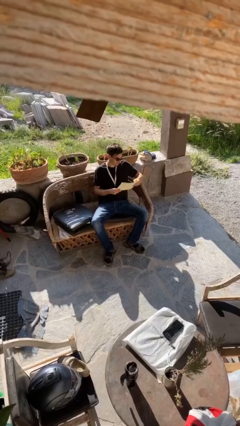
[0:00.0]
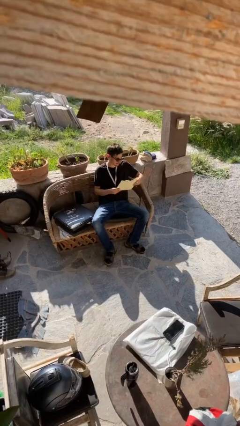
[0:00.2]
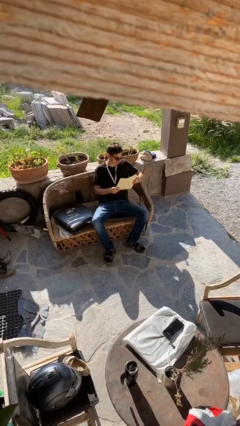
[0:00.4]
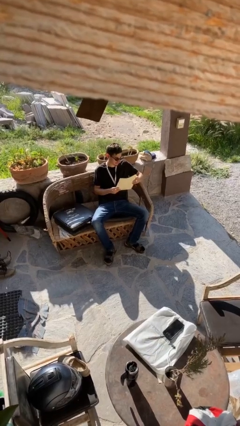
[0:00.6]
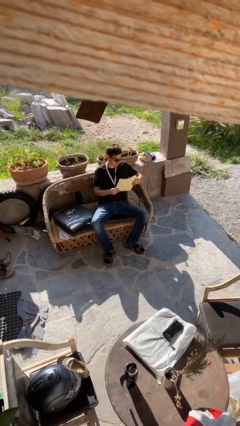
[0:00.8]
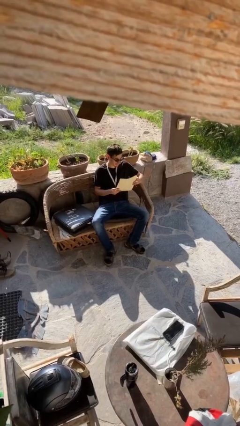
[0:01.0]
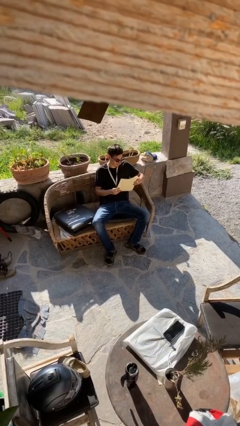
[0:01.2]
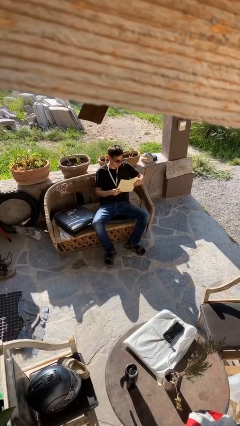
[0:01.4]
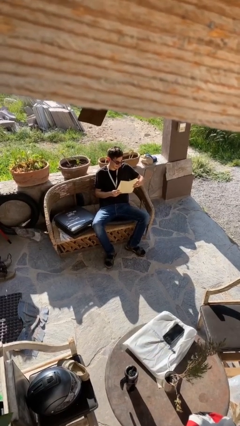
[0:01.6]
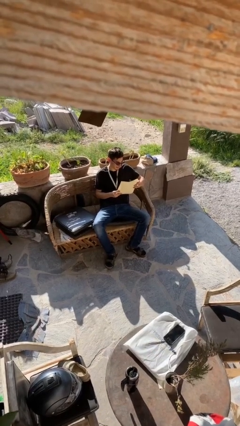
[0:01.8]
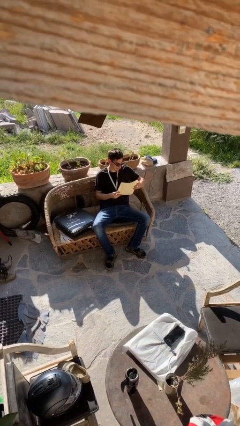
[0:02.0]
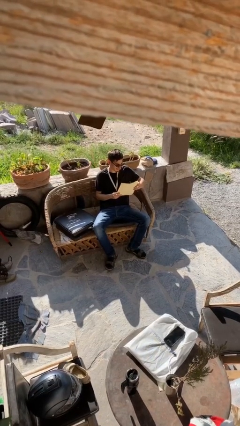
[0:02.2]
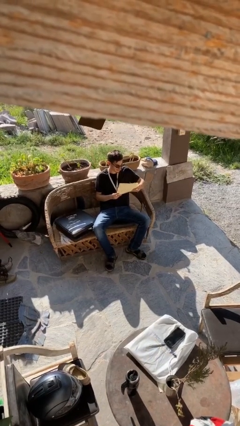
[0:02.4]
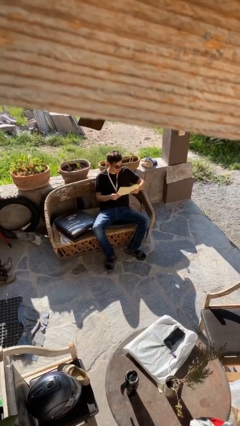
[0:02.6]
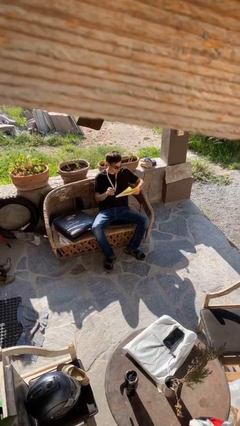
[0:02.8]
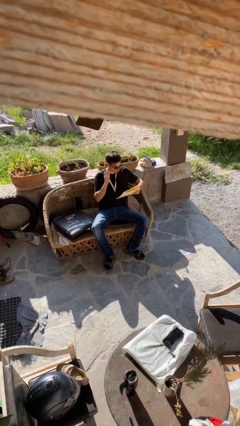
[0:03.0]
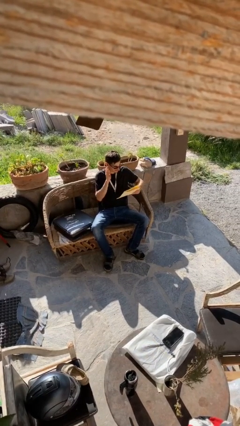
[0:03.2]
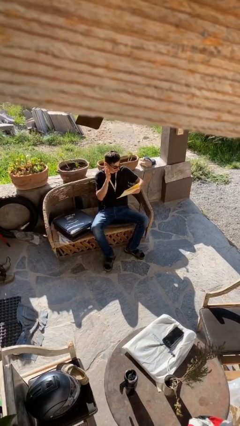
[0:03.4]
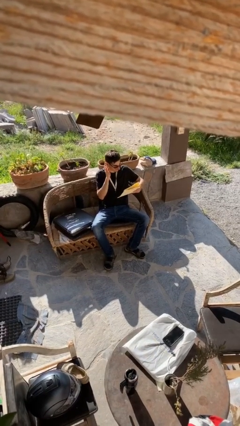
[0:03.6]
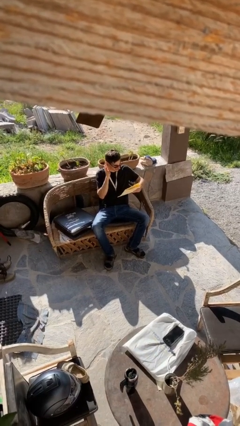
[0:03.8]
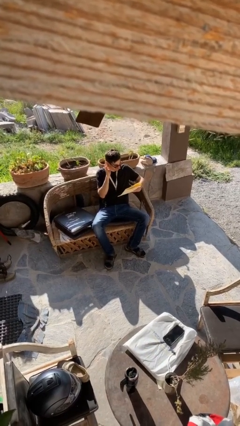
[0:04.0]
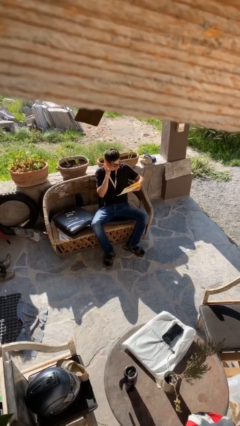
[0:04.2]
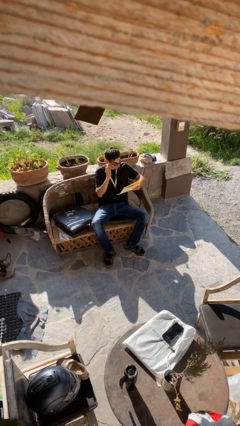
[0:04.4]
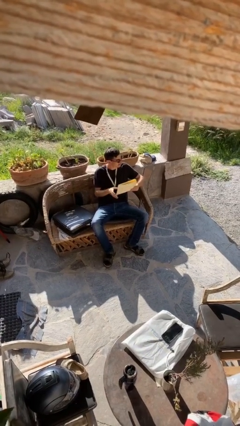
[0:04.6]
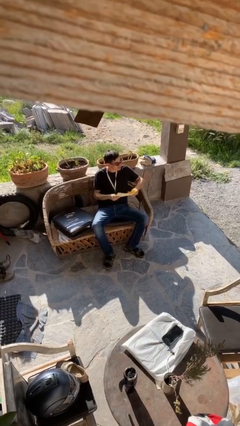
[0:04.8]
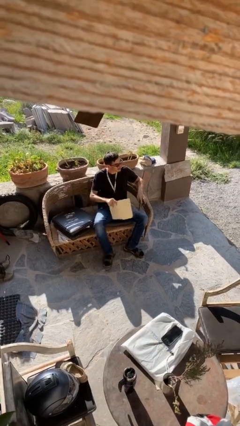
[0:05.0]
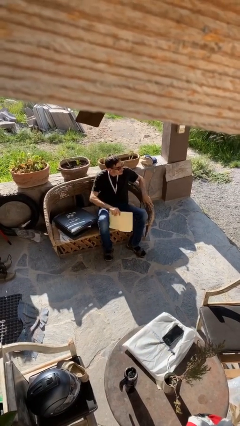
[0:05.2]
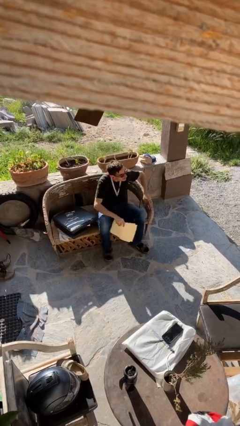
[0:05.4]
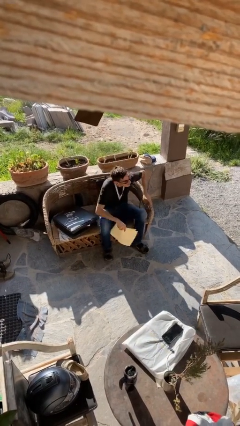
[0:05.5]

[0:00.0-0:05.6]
person reads document

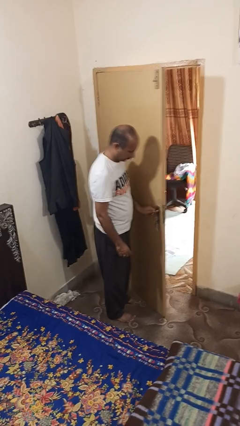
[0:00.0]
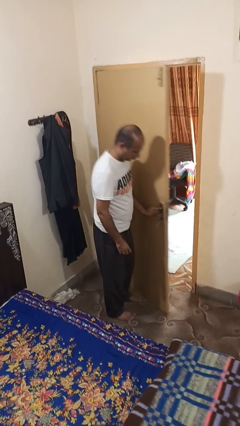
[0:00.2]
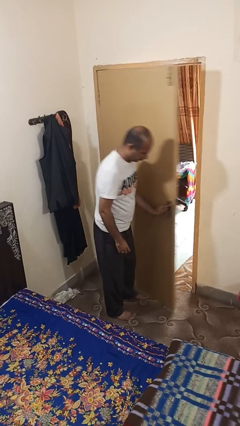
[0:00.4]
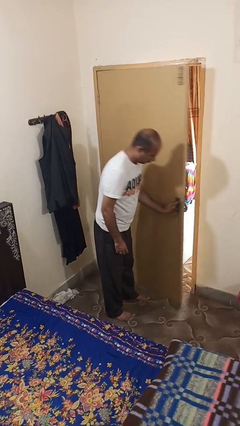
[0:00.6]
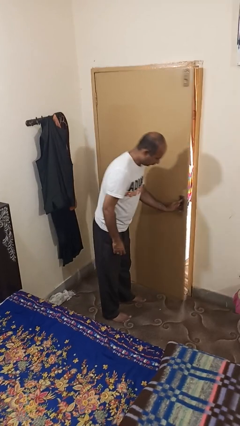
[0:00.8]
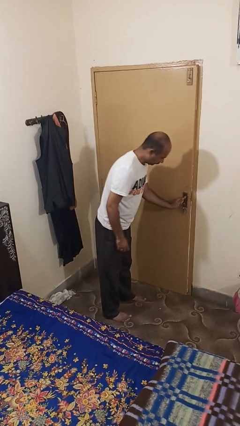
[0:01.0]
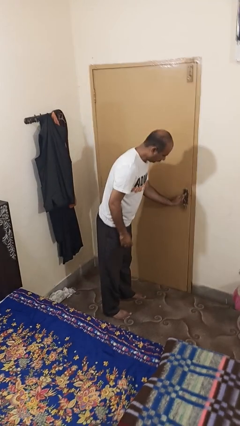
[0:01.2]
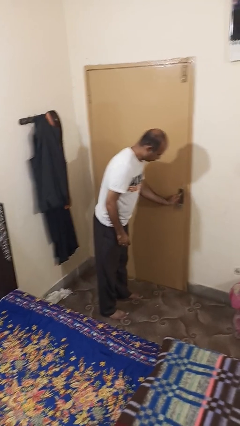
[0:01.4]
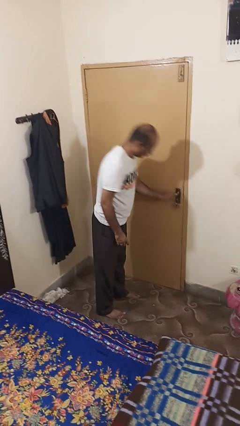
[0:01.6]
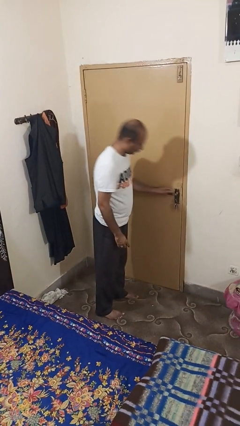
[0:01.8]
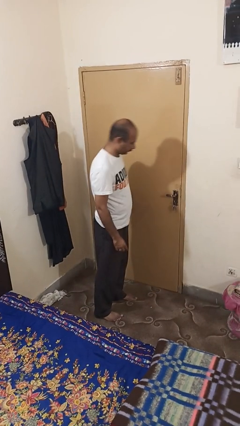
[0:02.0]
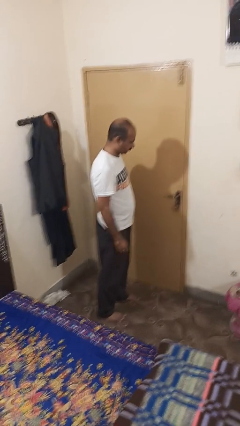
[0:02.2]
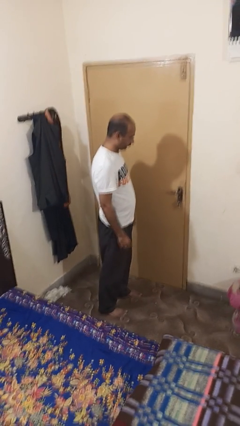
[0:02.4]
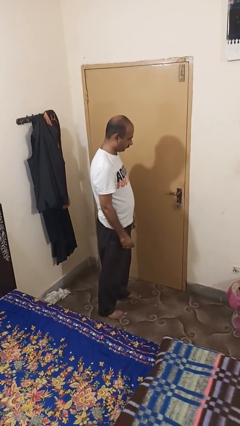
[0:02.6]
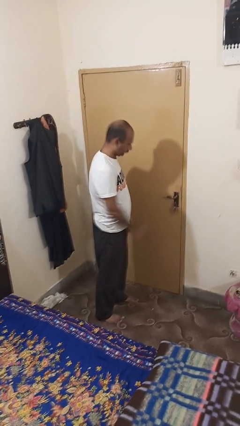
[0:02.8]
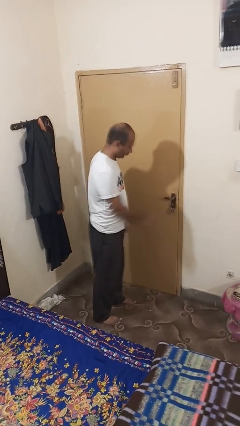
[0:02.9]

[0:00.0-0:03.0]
person closes facility door

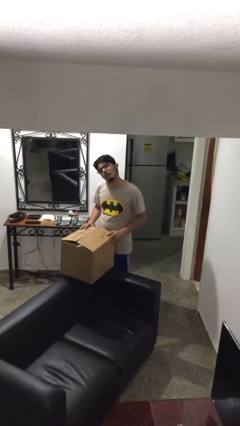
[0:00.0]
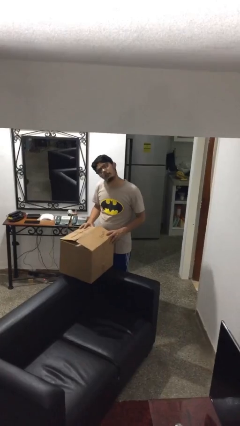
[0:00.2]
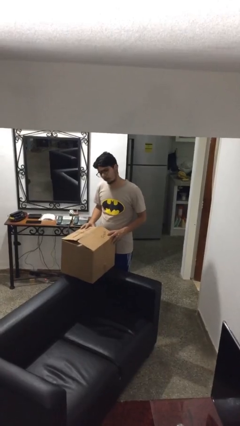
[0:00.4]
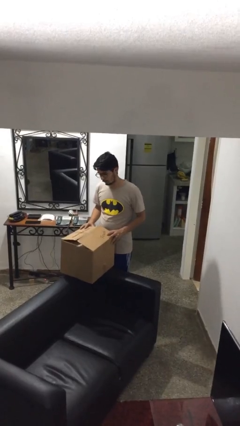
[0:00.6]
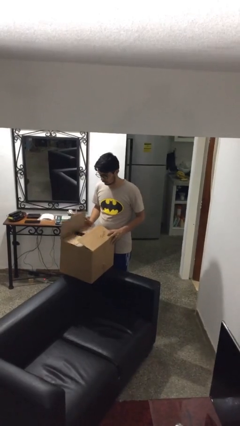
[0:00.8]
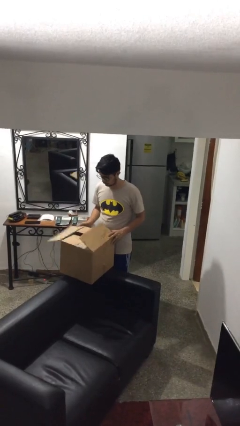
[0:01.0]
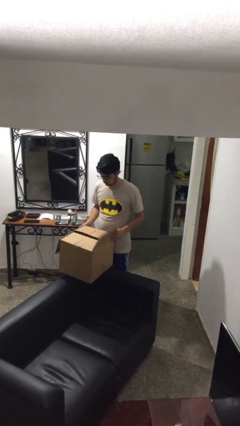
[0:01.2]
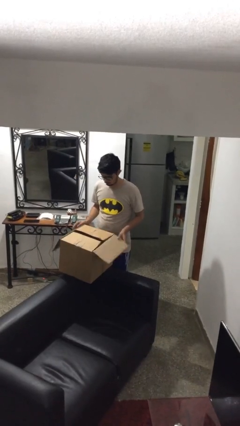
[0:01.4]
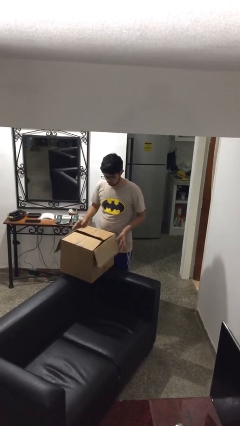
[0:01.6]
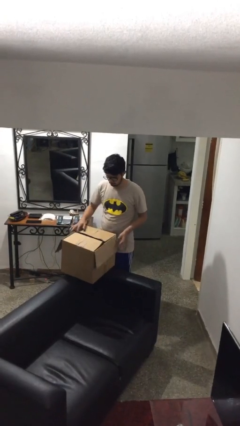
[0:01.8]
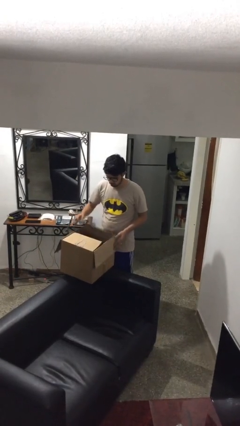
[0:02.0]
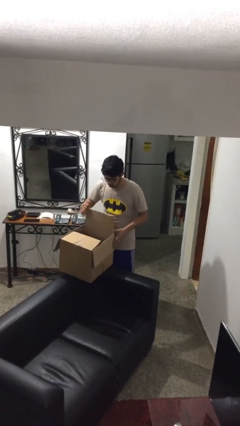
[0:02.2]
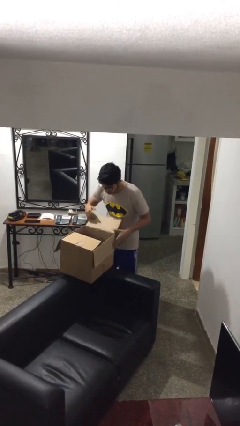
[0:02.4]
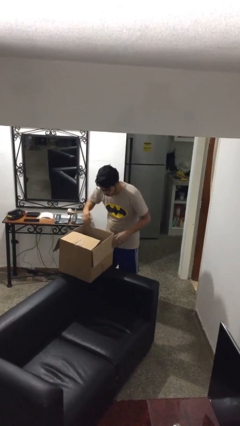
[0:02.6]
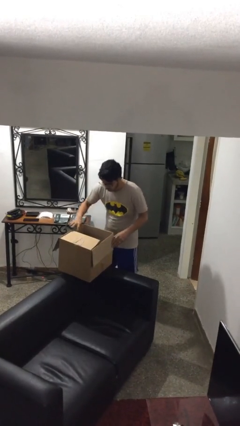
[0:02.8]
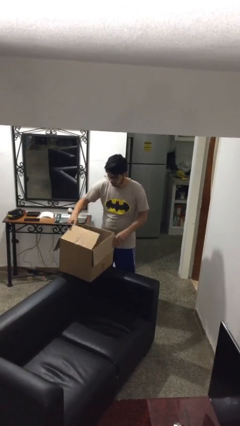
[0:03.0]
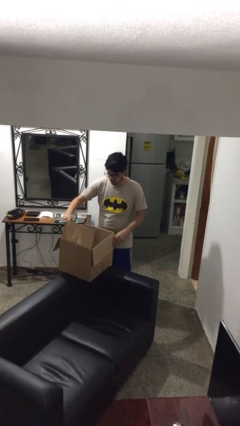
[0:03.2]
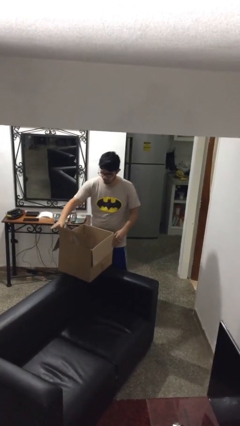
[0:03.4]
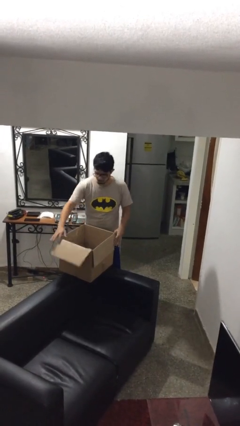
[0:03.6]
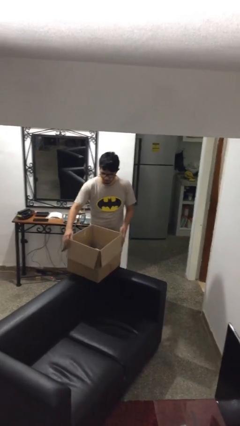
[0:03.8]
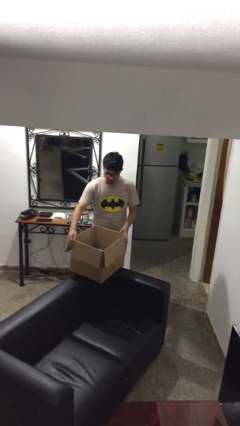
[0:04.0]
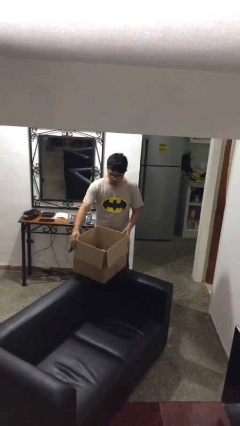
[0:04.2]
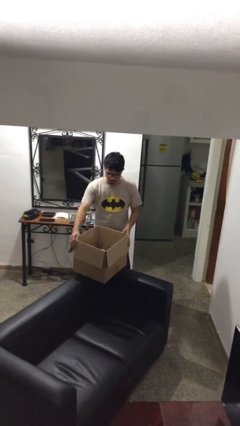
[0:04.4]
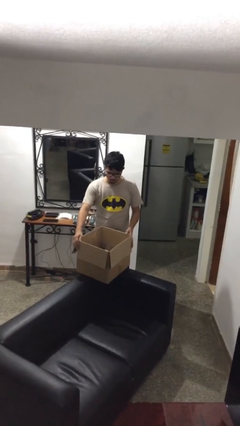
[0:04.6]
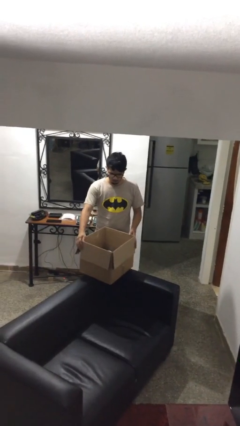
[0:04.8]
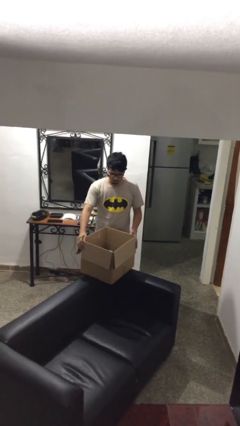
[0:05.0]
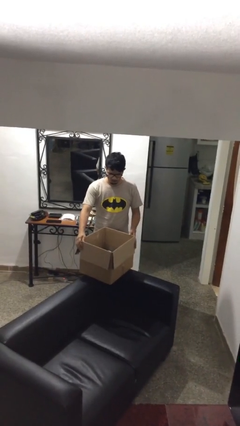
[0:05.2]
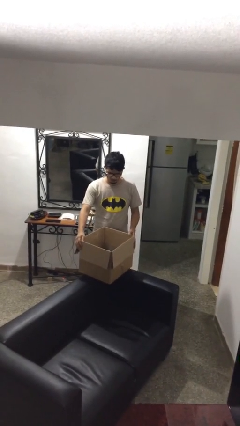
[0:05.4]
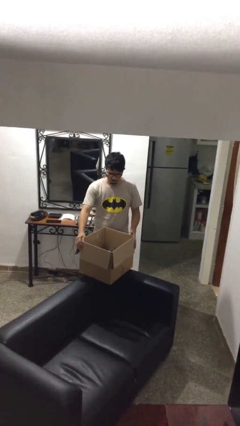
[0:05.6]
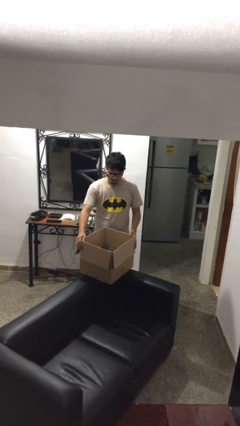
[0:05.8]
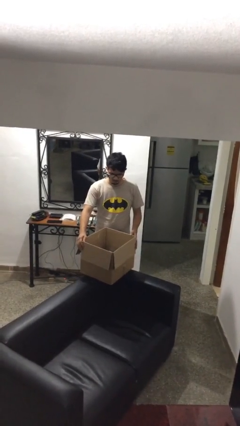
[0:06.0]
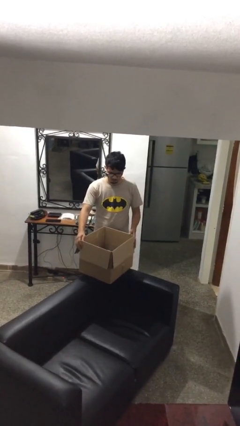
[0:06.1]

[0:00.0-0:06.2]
person opens box

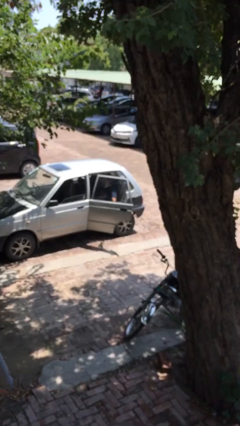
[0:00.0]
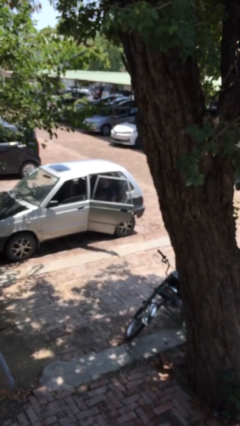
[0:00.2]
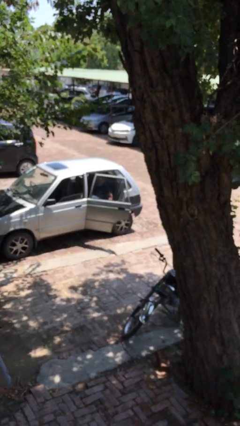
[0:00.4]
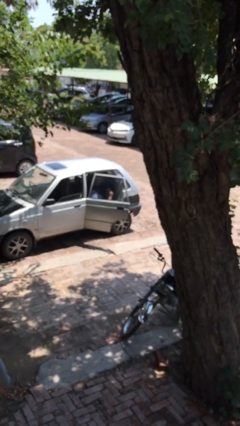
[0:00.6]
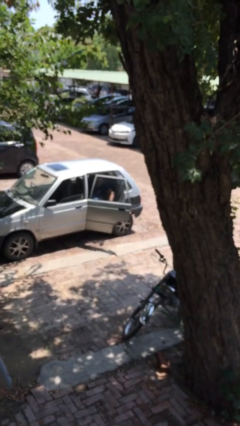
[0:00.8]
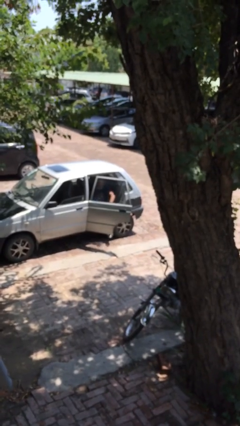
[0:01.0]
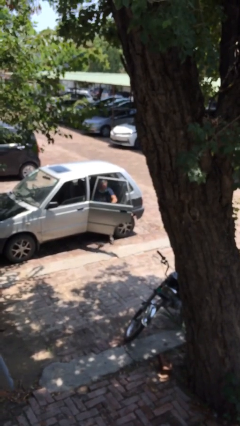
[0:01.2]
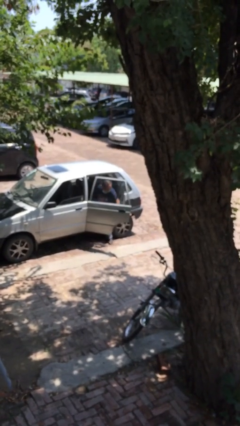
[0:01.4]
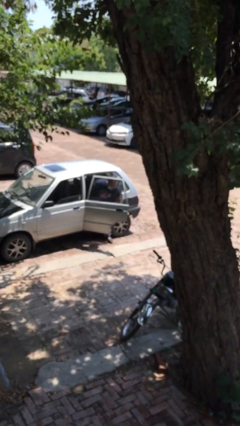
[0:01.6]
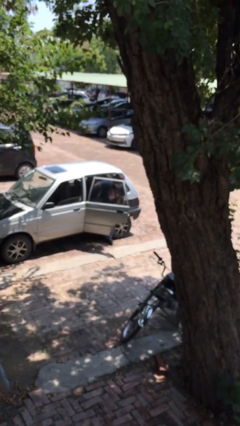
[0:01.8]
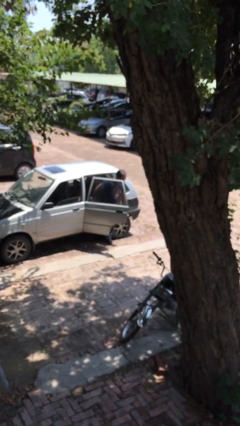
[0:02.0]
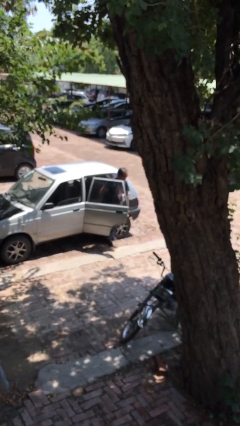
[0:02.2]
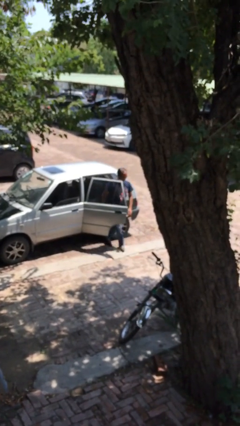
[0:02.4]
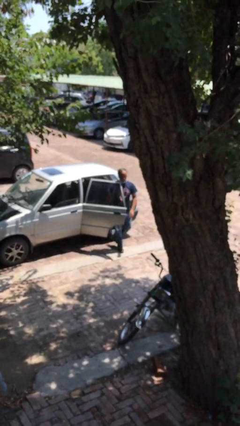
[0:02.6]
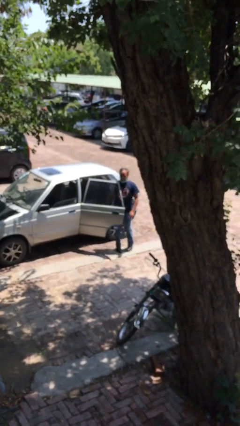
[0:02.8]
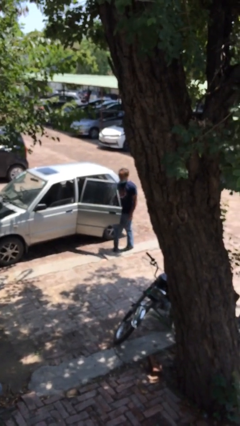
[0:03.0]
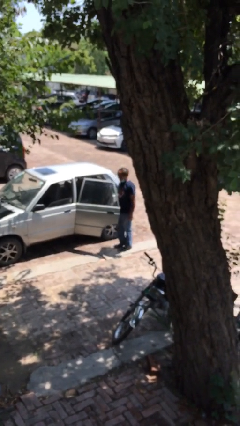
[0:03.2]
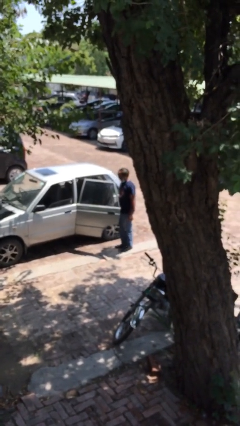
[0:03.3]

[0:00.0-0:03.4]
person exits car
